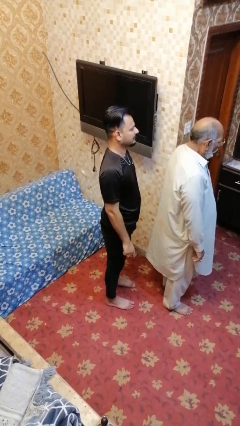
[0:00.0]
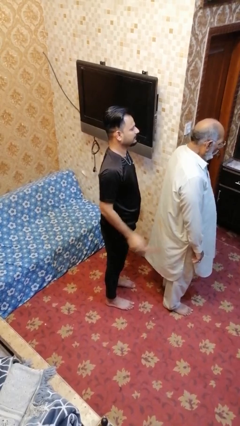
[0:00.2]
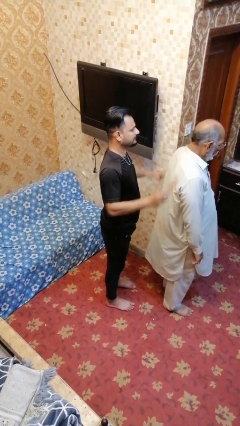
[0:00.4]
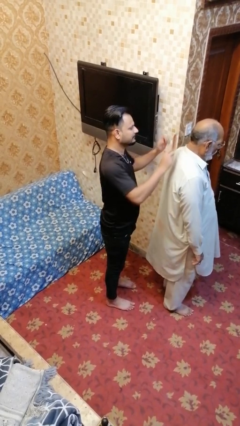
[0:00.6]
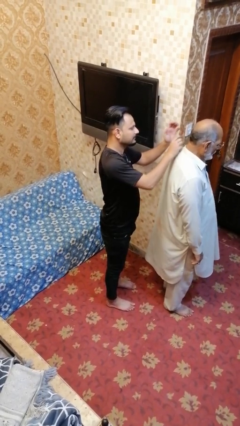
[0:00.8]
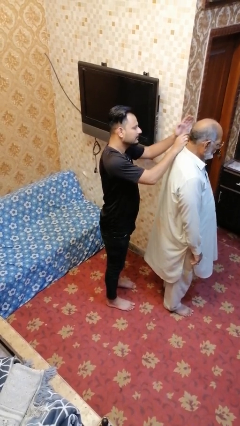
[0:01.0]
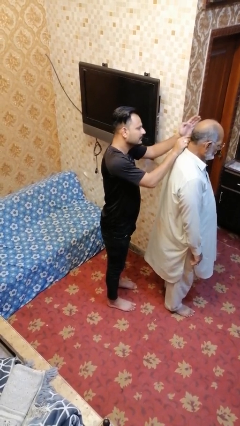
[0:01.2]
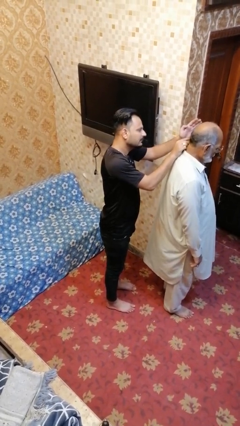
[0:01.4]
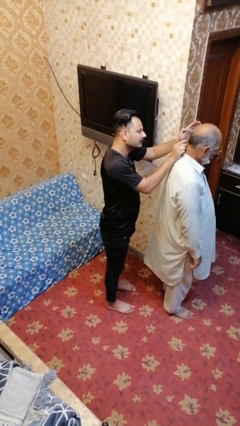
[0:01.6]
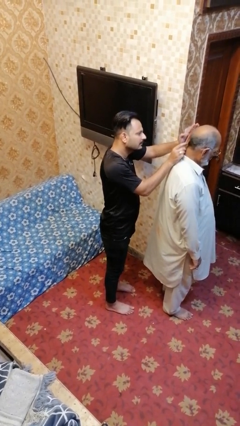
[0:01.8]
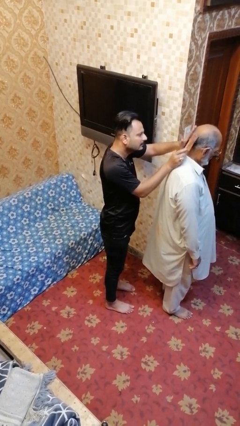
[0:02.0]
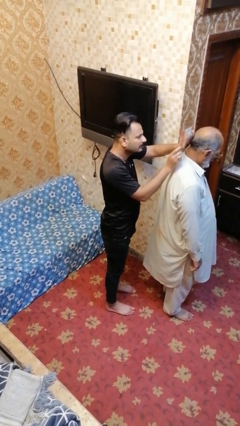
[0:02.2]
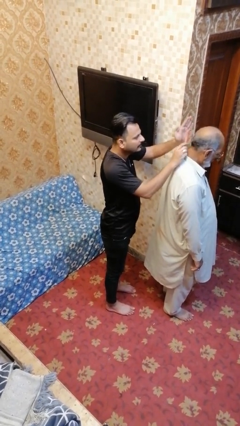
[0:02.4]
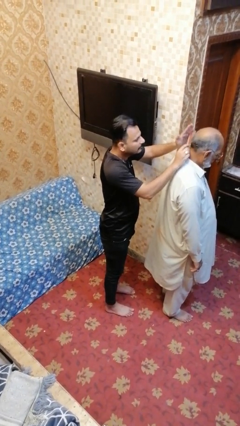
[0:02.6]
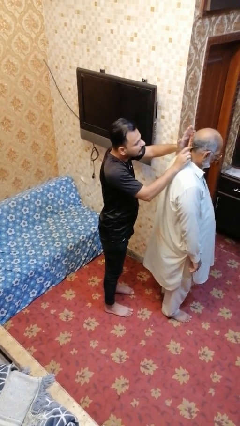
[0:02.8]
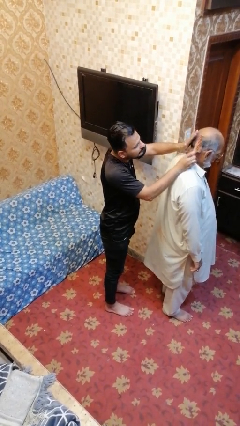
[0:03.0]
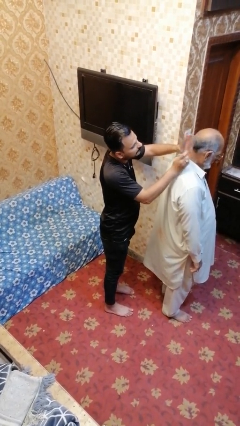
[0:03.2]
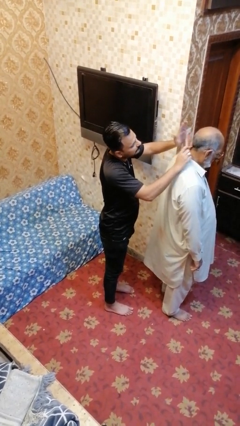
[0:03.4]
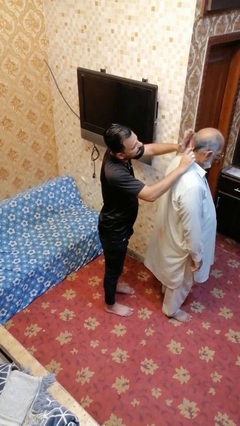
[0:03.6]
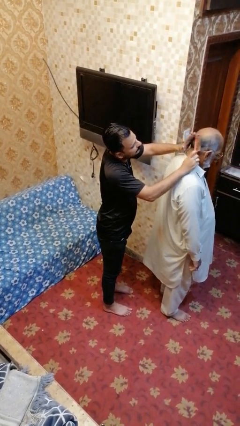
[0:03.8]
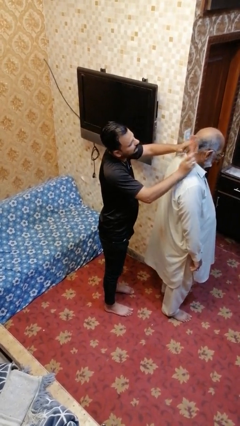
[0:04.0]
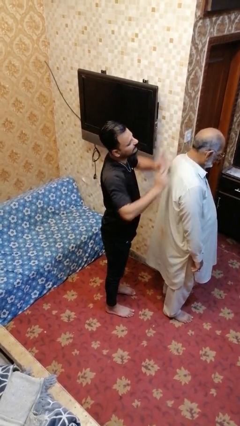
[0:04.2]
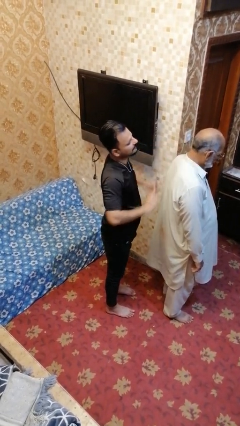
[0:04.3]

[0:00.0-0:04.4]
person brushes hair of person

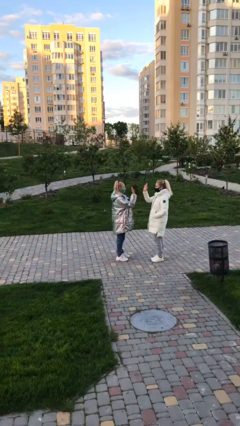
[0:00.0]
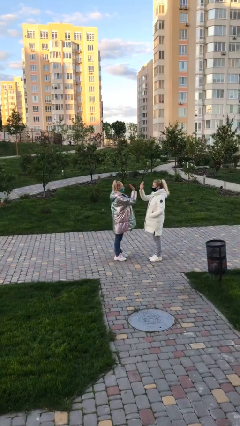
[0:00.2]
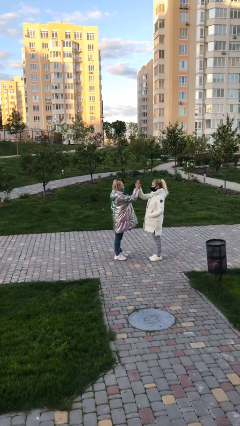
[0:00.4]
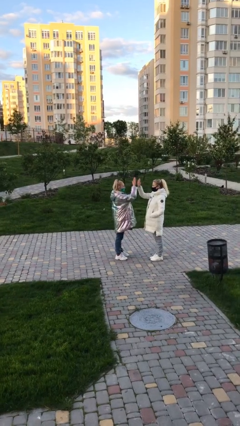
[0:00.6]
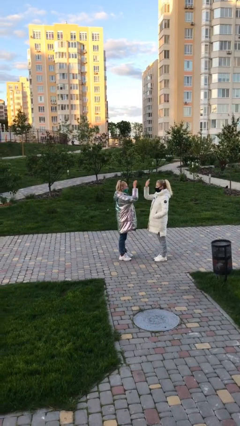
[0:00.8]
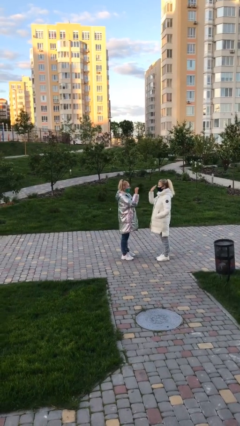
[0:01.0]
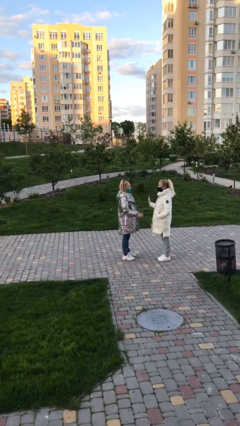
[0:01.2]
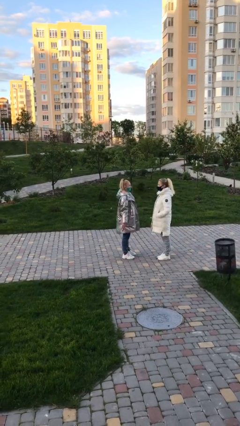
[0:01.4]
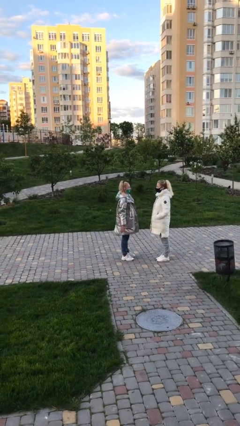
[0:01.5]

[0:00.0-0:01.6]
person highfives hand

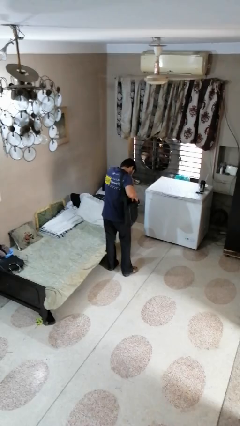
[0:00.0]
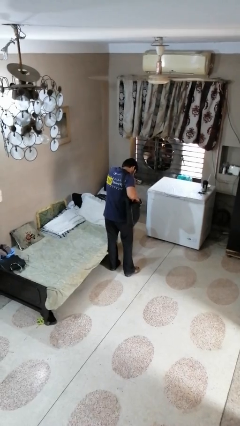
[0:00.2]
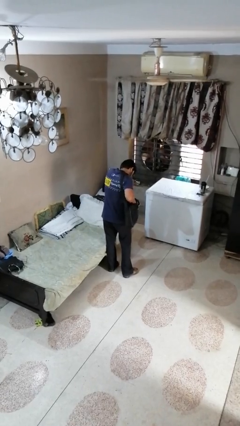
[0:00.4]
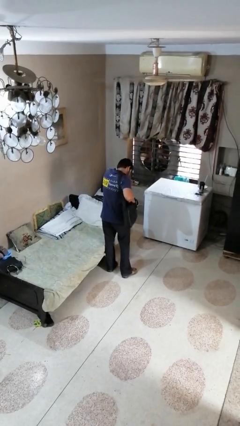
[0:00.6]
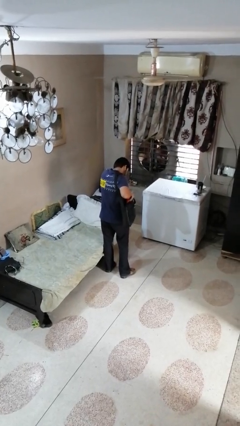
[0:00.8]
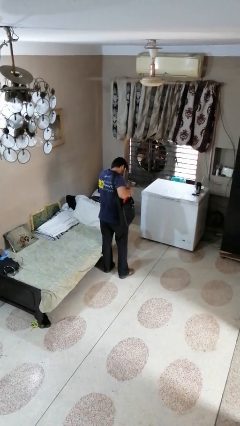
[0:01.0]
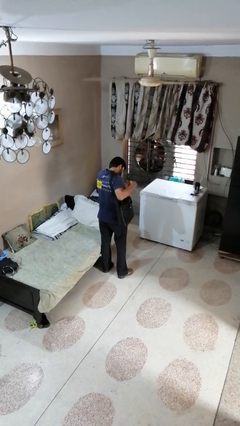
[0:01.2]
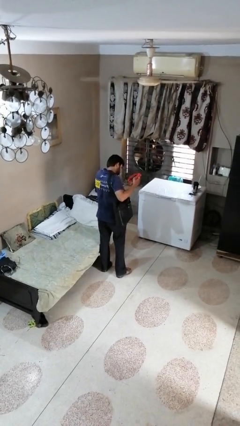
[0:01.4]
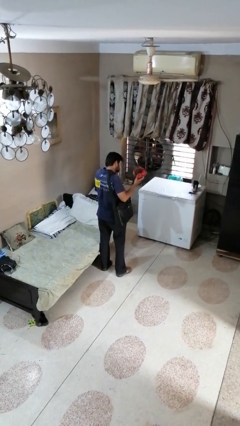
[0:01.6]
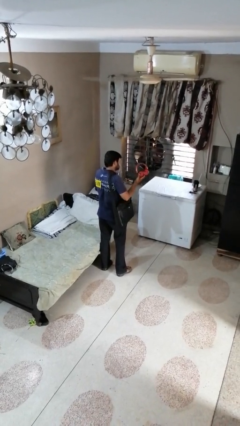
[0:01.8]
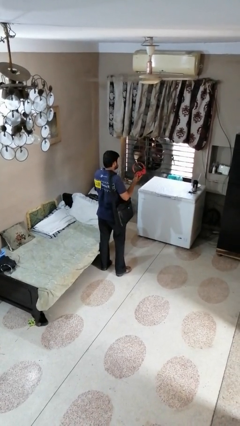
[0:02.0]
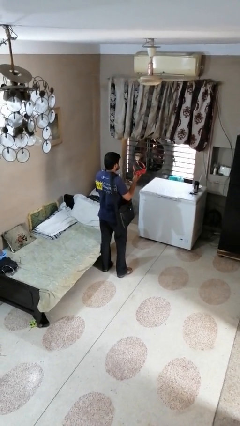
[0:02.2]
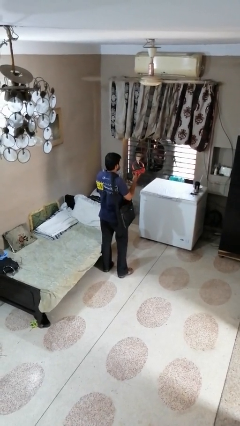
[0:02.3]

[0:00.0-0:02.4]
person takes object from backpack

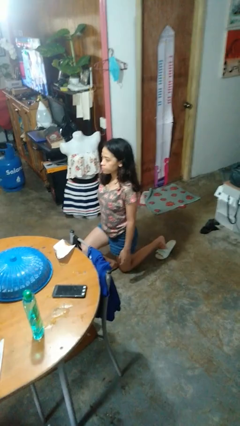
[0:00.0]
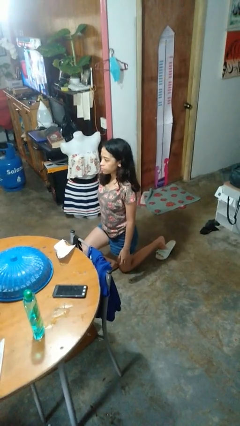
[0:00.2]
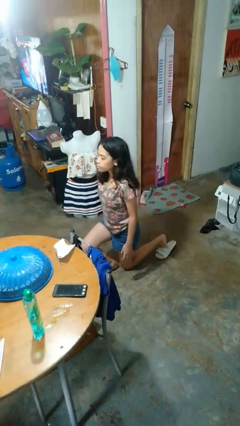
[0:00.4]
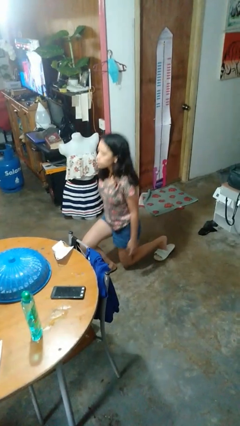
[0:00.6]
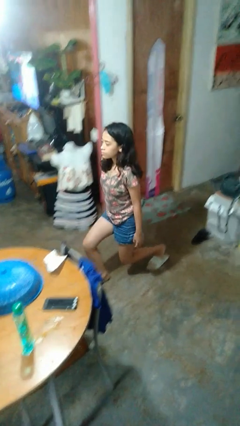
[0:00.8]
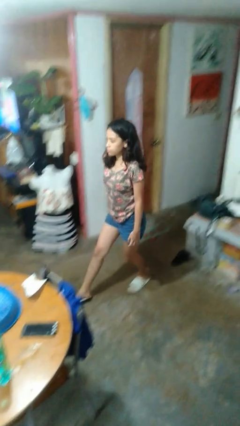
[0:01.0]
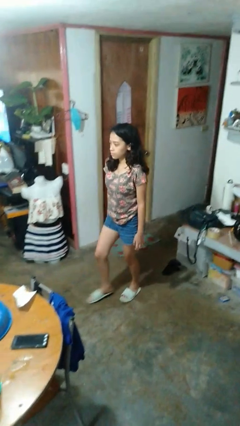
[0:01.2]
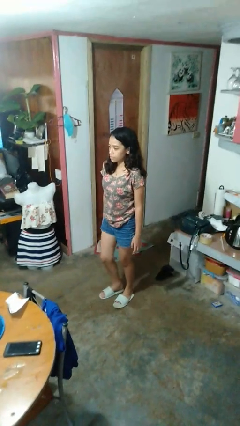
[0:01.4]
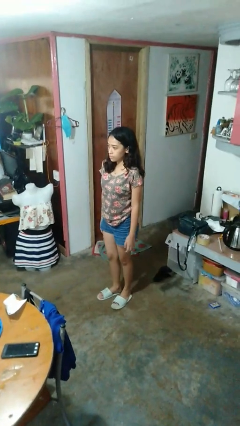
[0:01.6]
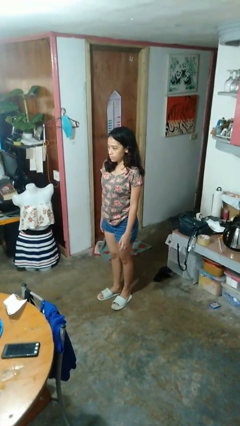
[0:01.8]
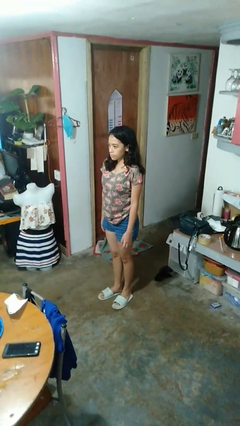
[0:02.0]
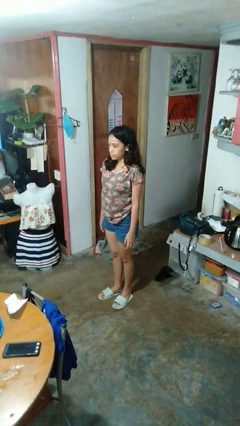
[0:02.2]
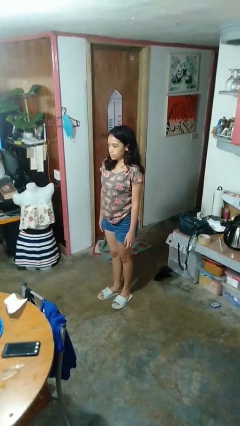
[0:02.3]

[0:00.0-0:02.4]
person stands up from floor

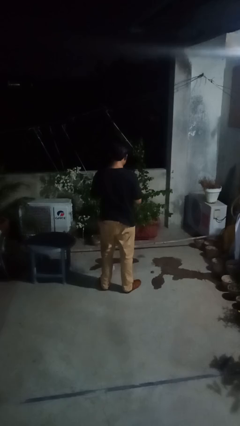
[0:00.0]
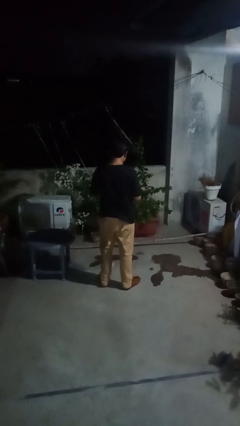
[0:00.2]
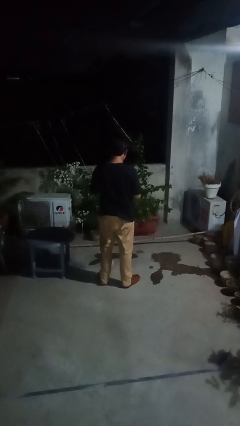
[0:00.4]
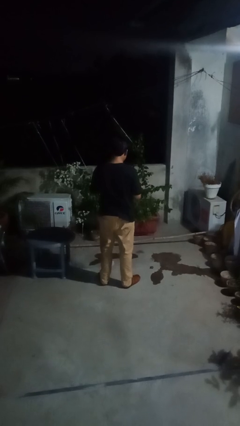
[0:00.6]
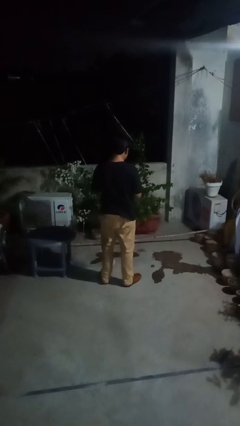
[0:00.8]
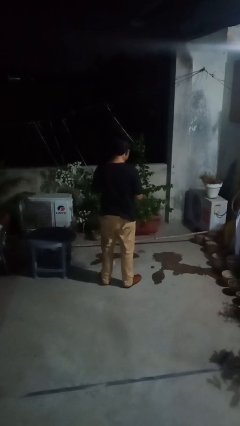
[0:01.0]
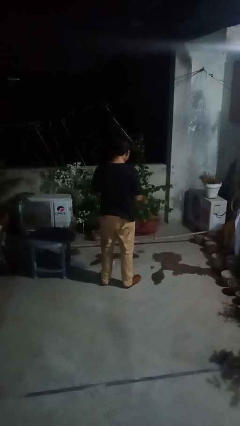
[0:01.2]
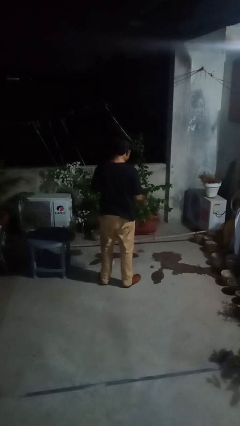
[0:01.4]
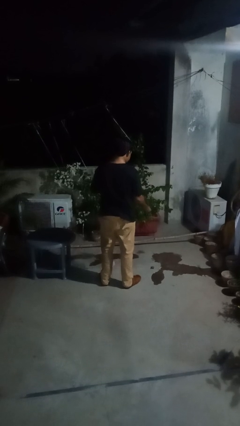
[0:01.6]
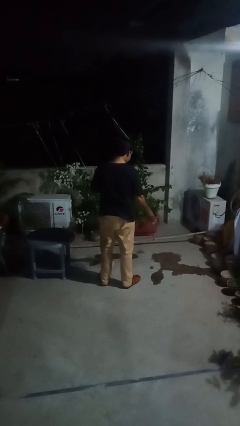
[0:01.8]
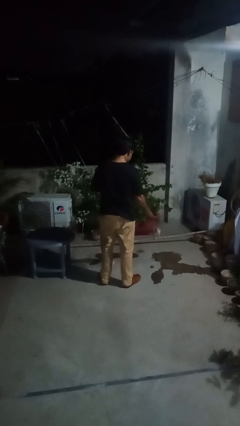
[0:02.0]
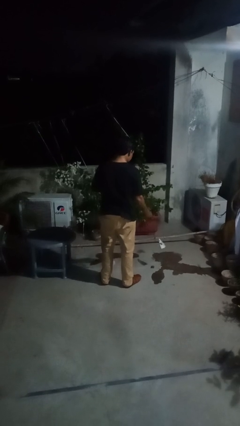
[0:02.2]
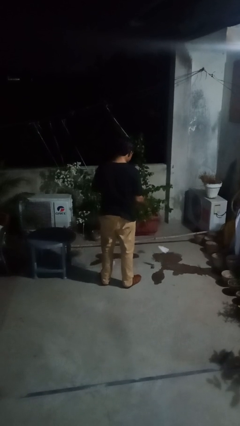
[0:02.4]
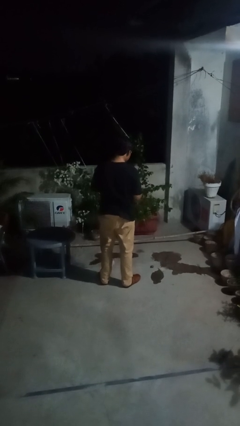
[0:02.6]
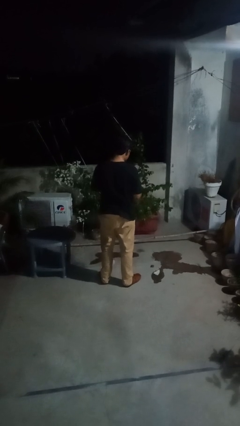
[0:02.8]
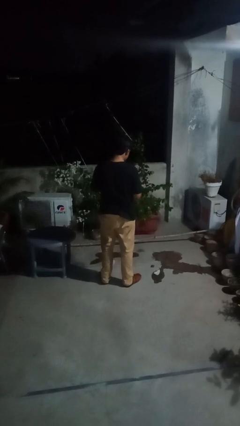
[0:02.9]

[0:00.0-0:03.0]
person tears paper

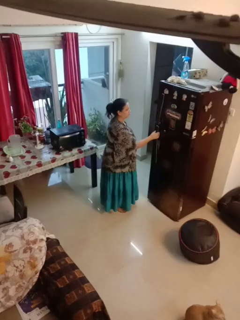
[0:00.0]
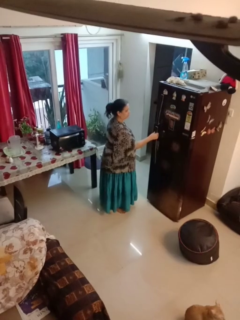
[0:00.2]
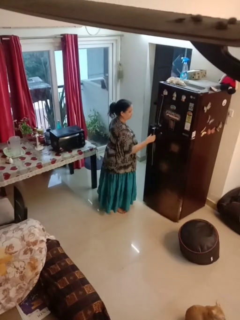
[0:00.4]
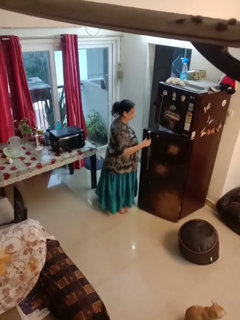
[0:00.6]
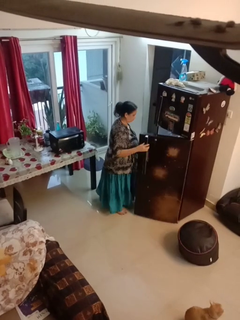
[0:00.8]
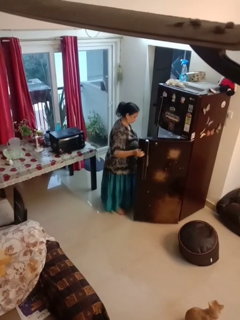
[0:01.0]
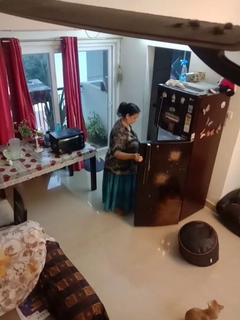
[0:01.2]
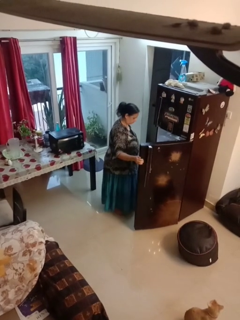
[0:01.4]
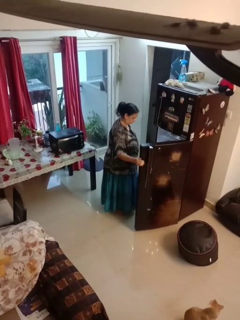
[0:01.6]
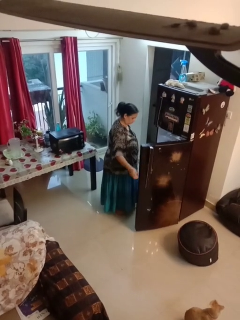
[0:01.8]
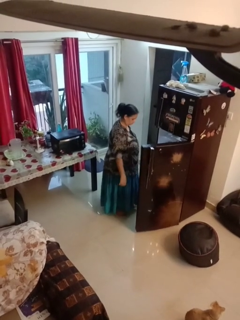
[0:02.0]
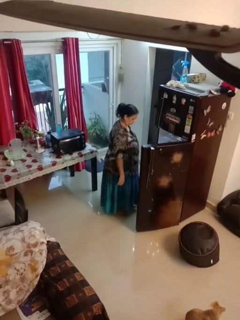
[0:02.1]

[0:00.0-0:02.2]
person opens refrigerator

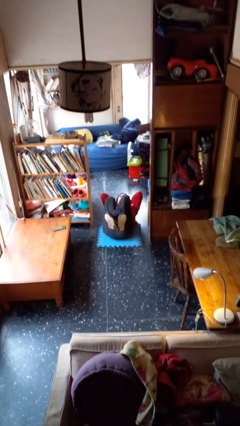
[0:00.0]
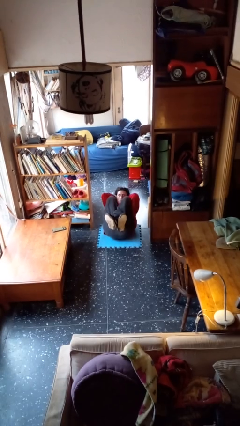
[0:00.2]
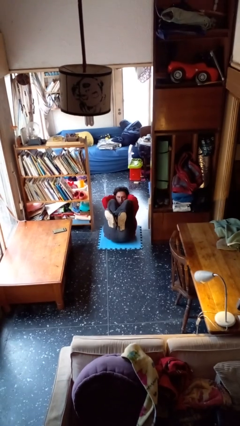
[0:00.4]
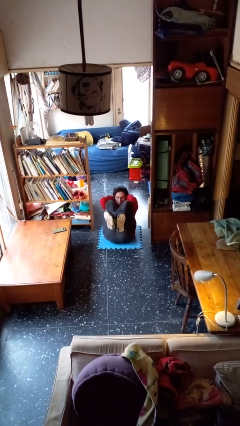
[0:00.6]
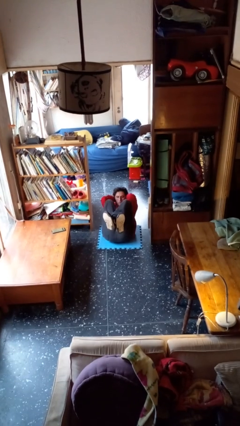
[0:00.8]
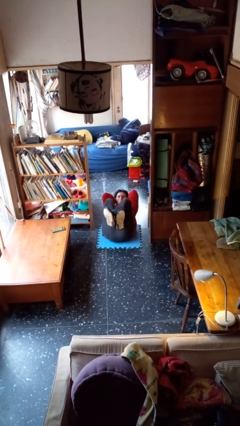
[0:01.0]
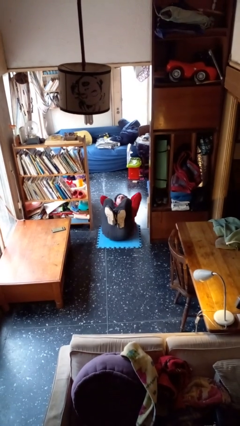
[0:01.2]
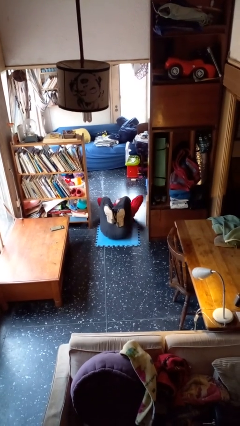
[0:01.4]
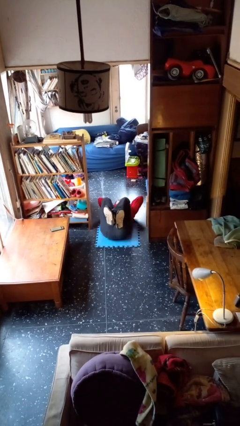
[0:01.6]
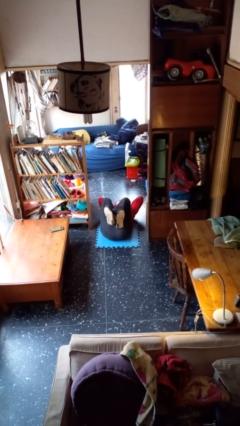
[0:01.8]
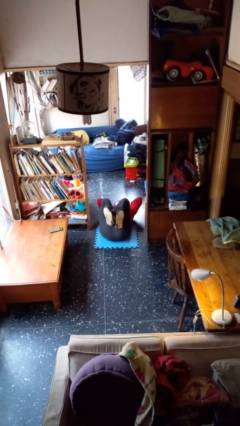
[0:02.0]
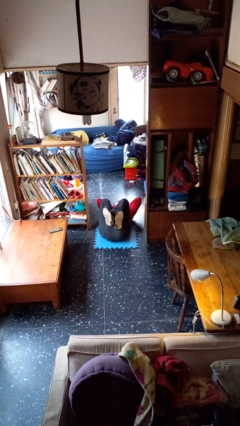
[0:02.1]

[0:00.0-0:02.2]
person exercises with situp
